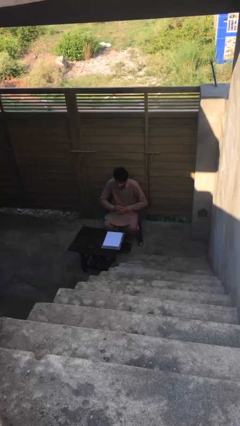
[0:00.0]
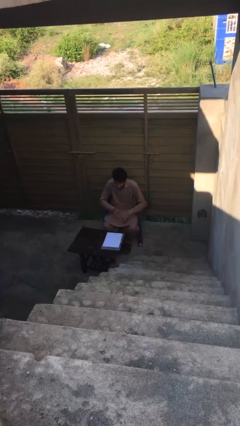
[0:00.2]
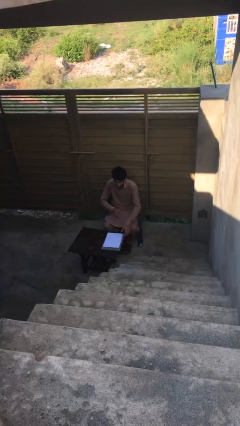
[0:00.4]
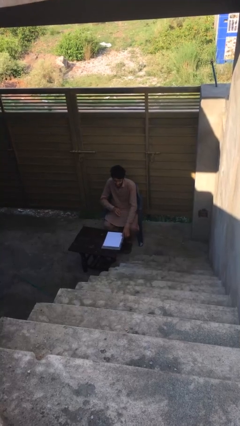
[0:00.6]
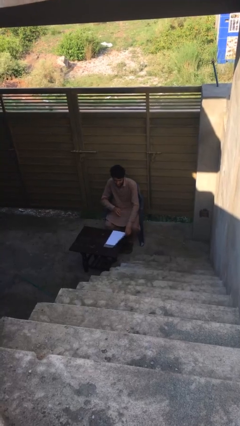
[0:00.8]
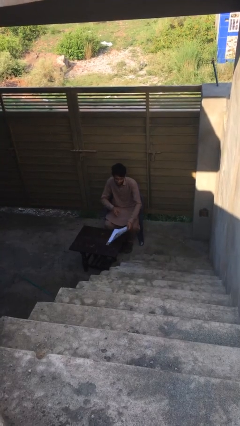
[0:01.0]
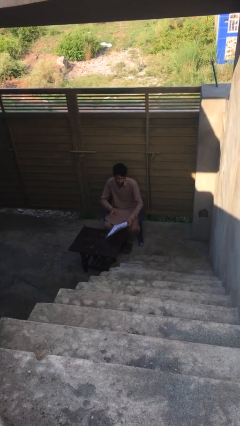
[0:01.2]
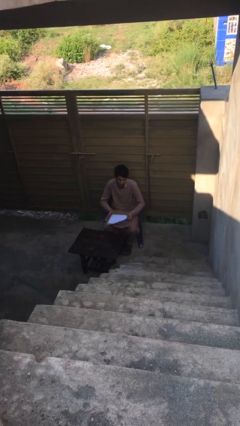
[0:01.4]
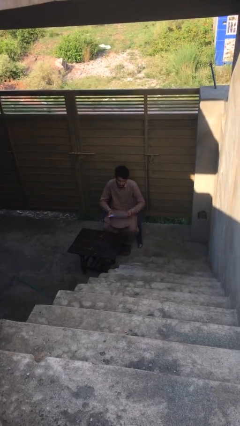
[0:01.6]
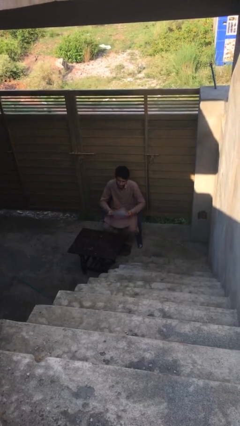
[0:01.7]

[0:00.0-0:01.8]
person picks up object from table

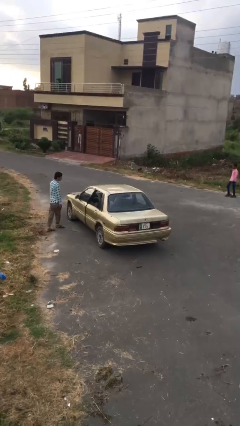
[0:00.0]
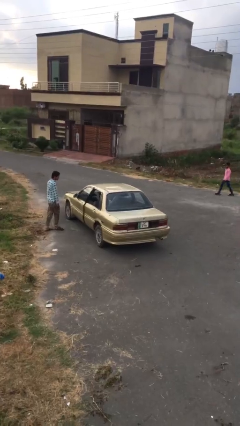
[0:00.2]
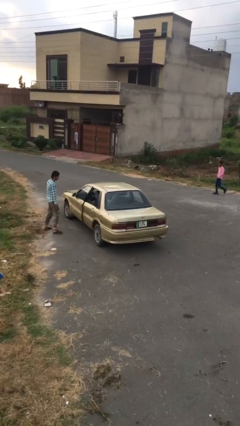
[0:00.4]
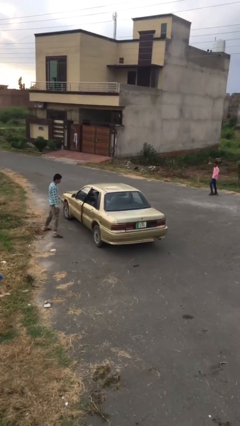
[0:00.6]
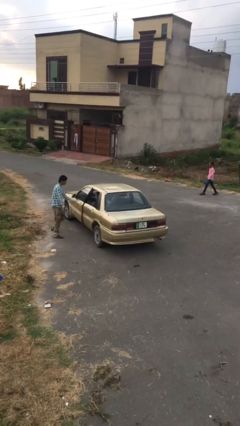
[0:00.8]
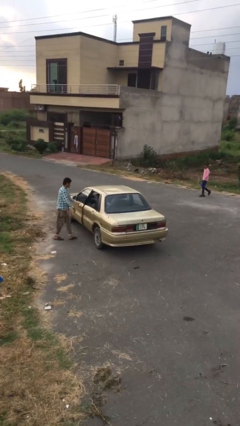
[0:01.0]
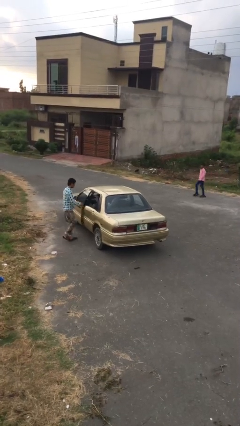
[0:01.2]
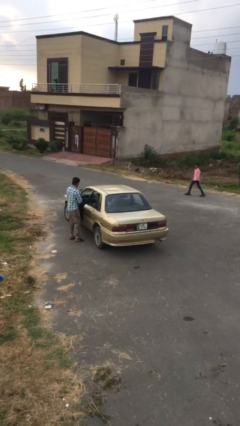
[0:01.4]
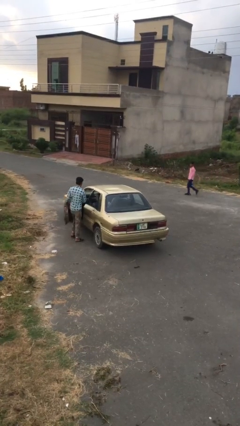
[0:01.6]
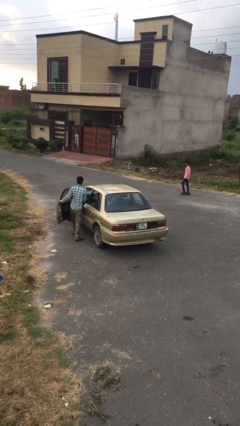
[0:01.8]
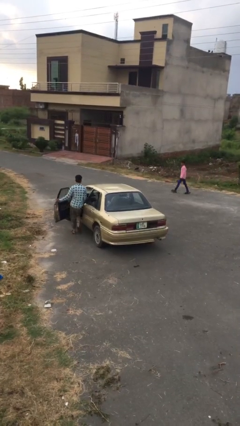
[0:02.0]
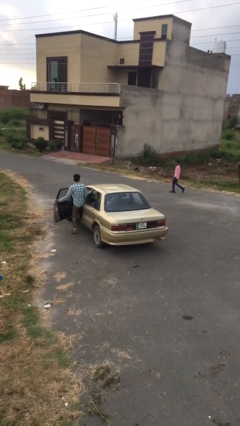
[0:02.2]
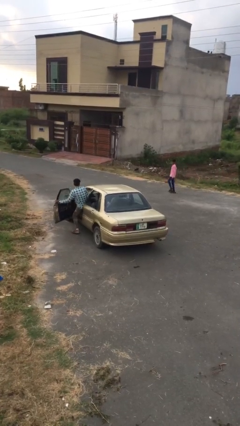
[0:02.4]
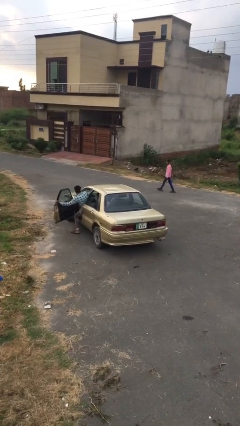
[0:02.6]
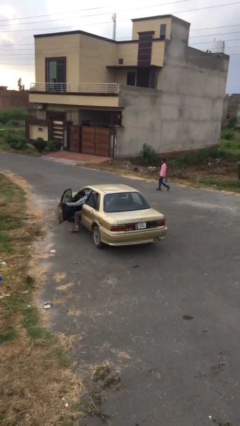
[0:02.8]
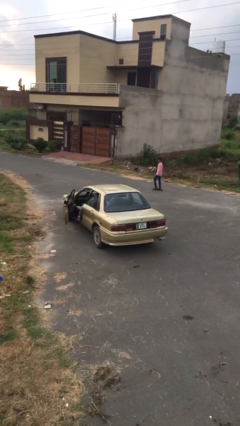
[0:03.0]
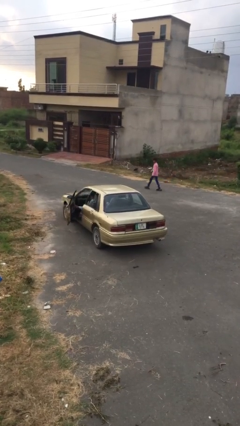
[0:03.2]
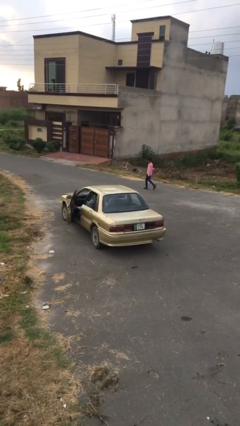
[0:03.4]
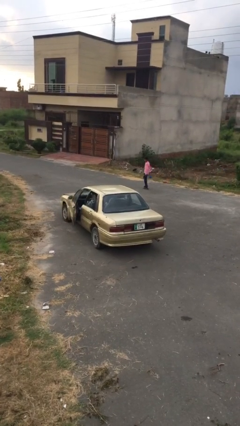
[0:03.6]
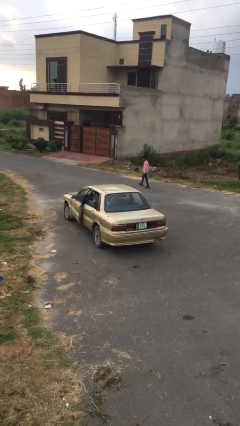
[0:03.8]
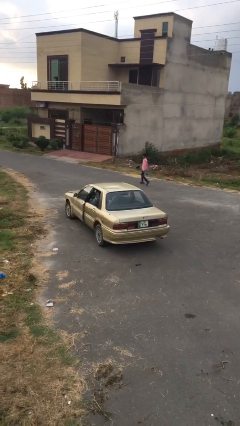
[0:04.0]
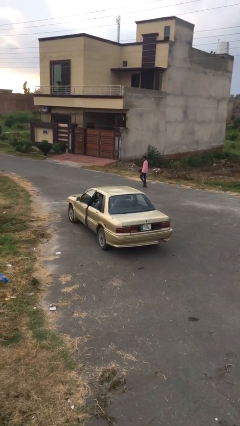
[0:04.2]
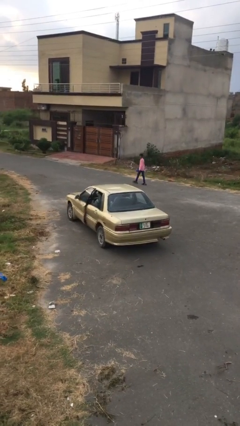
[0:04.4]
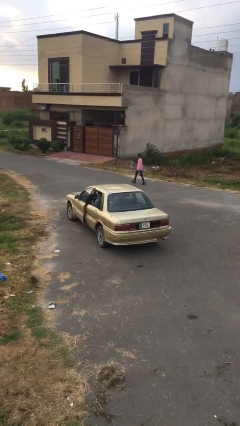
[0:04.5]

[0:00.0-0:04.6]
car picks up person

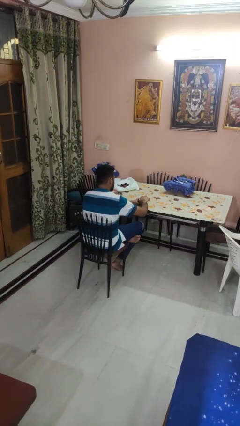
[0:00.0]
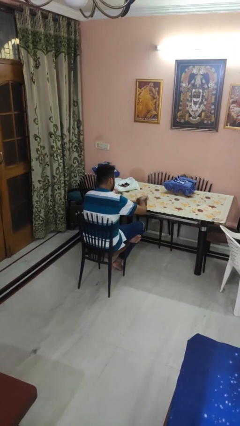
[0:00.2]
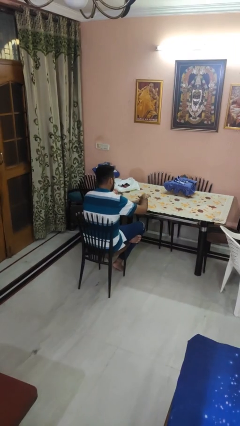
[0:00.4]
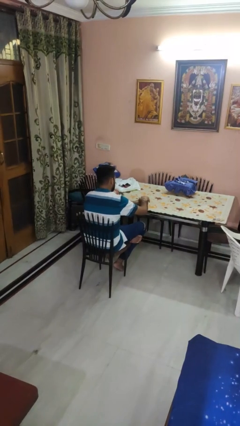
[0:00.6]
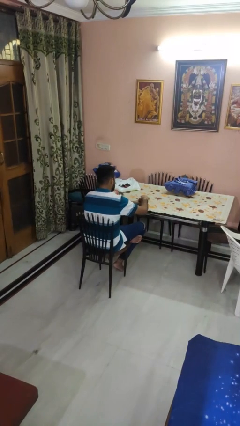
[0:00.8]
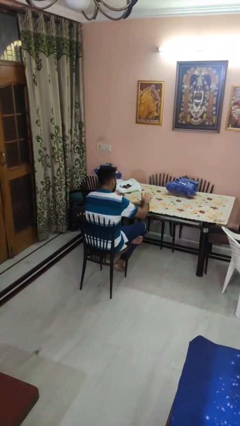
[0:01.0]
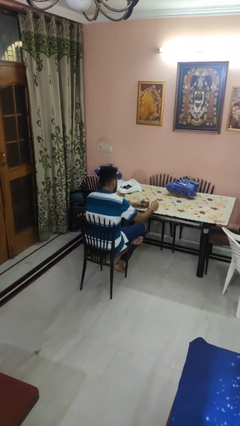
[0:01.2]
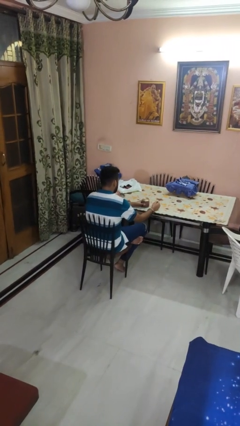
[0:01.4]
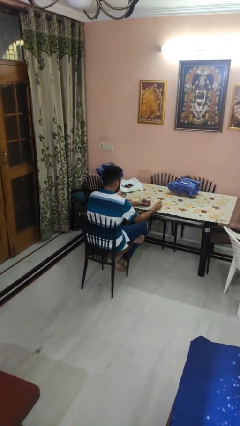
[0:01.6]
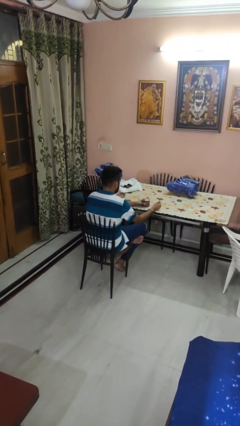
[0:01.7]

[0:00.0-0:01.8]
person closes jar

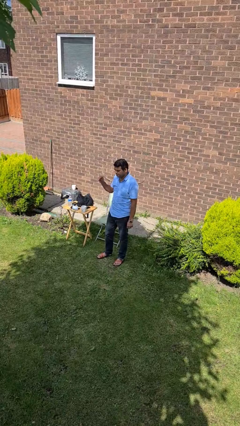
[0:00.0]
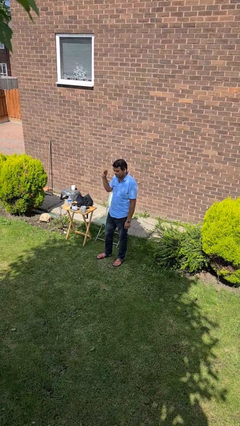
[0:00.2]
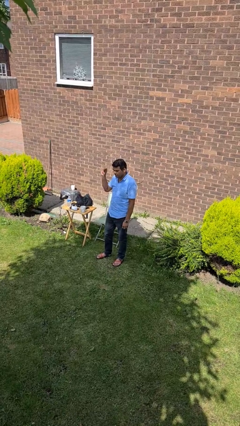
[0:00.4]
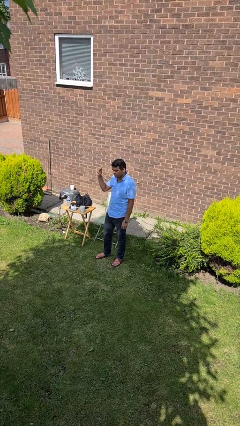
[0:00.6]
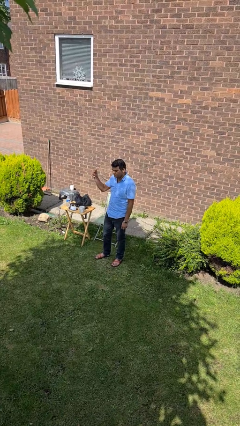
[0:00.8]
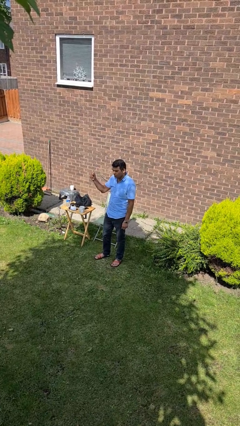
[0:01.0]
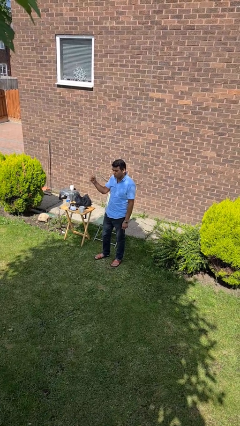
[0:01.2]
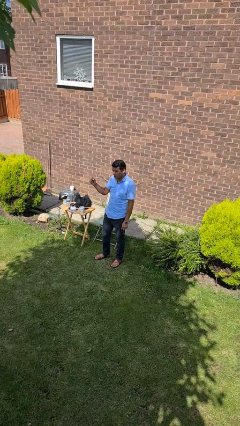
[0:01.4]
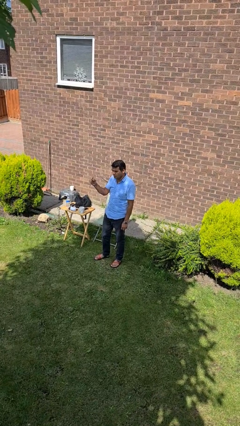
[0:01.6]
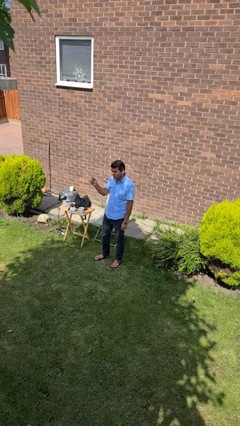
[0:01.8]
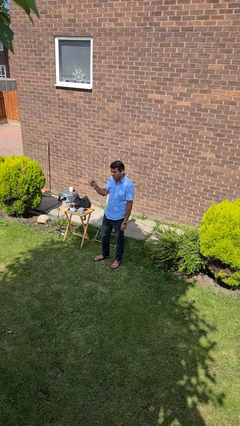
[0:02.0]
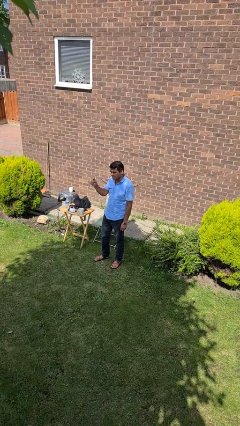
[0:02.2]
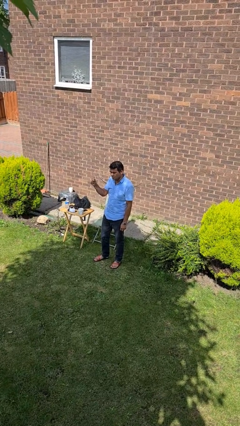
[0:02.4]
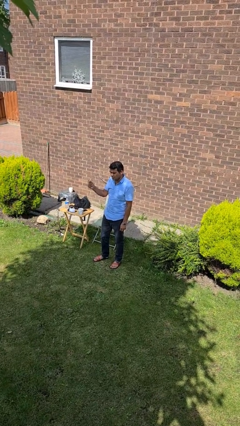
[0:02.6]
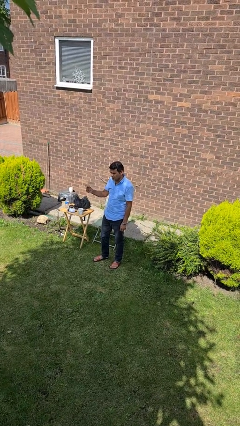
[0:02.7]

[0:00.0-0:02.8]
person snaps fingers

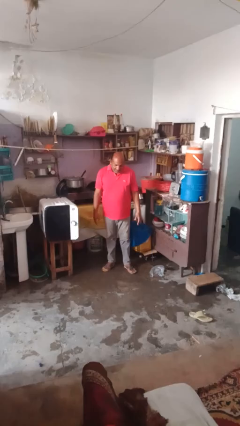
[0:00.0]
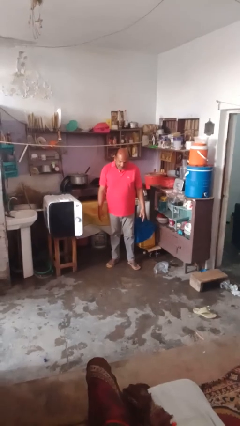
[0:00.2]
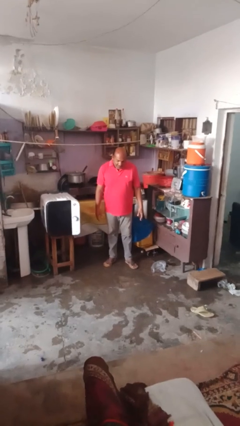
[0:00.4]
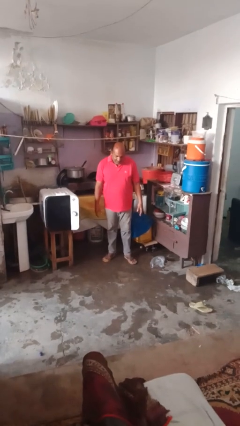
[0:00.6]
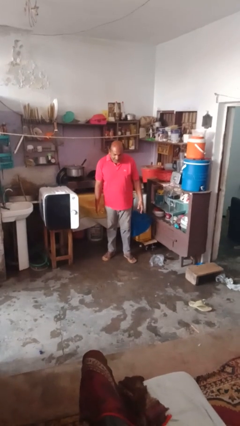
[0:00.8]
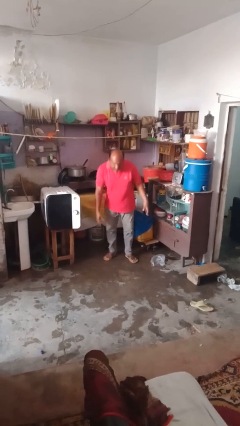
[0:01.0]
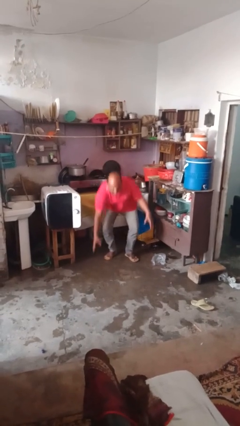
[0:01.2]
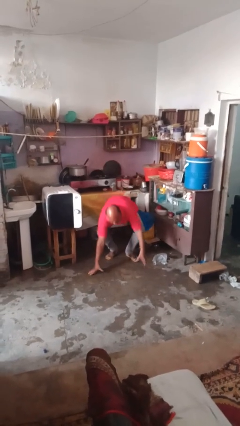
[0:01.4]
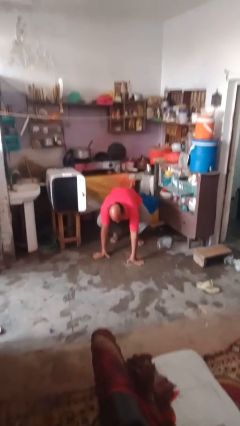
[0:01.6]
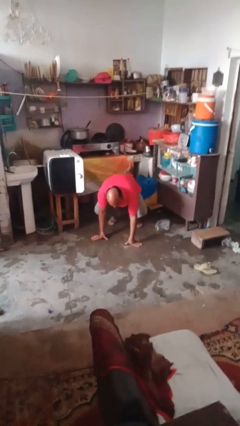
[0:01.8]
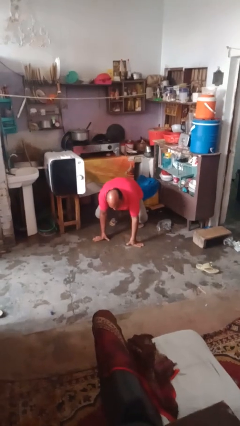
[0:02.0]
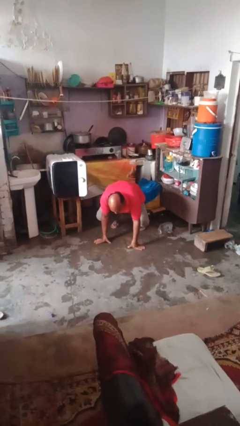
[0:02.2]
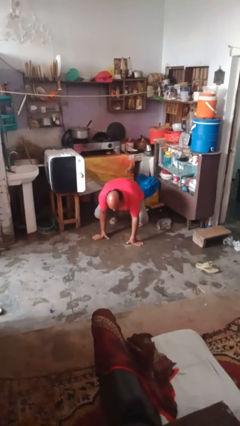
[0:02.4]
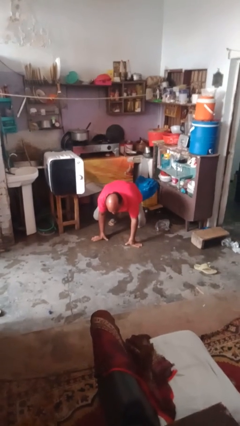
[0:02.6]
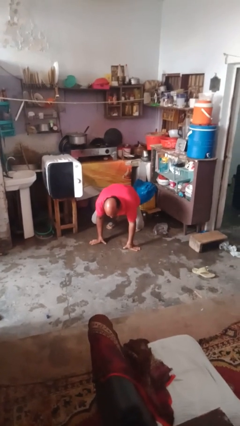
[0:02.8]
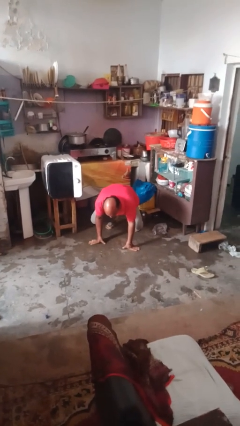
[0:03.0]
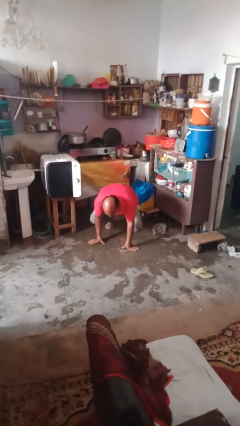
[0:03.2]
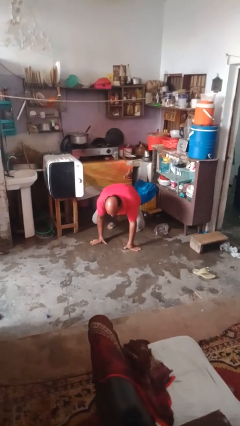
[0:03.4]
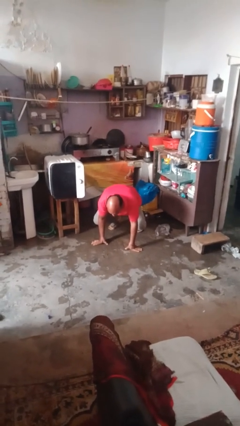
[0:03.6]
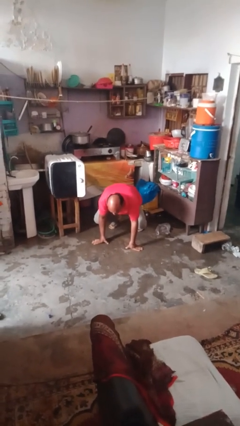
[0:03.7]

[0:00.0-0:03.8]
person falls while standing

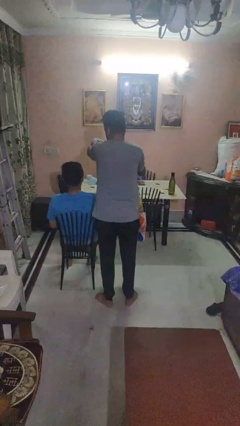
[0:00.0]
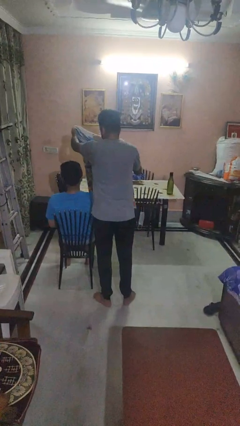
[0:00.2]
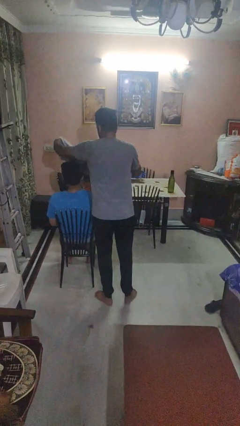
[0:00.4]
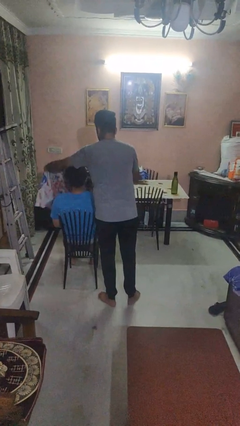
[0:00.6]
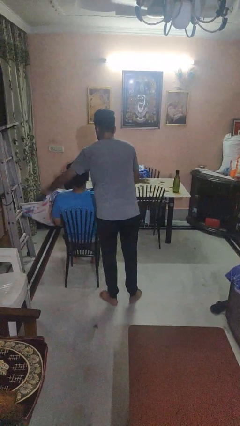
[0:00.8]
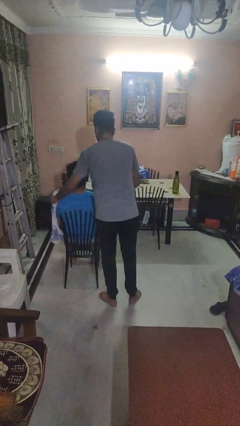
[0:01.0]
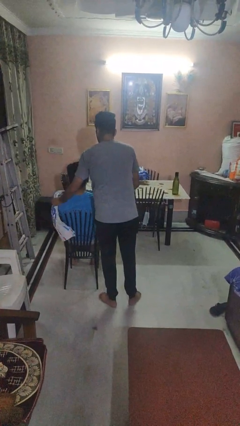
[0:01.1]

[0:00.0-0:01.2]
person covers friend with blanket

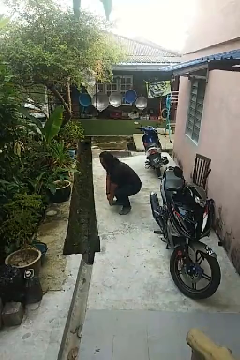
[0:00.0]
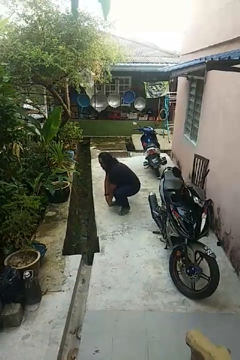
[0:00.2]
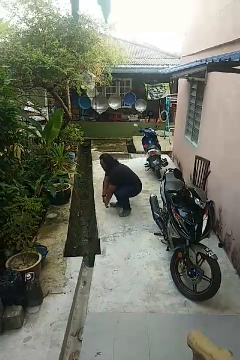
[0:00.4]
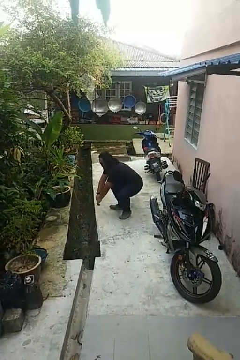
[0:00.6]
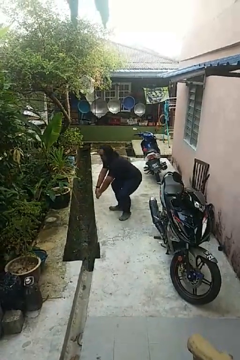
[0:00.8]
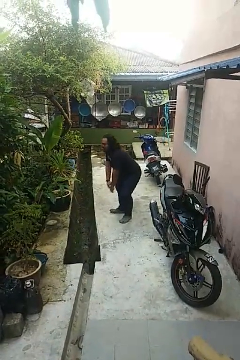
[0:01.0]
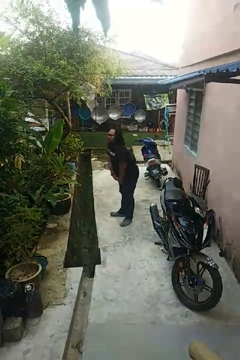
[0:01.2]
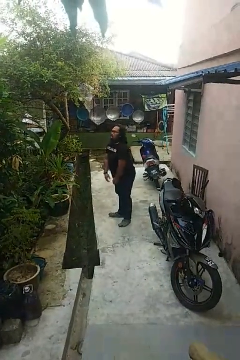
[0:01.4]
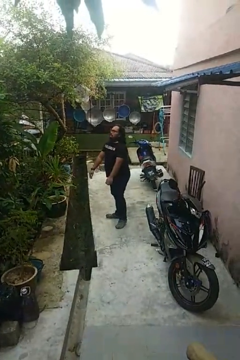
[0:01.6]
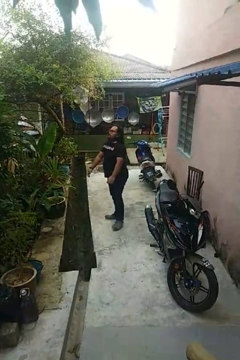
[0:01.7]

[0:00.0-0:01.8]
person stands up
